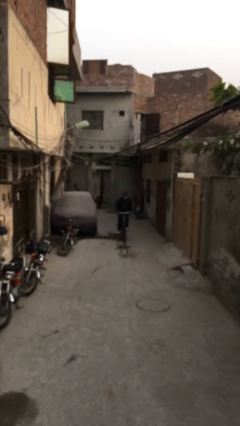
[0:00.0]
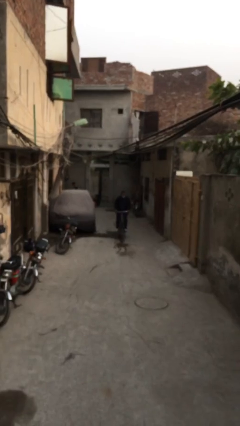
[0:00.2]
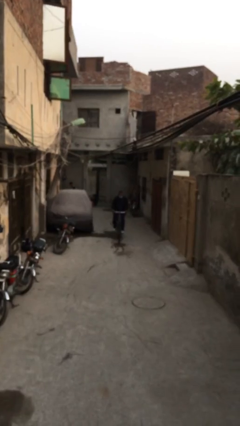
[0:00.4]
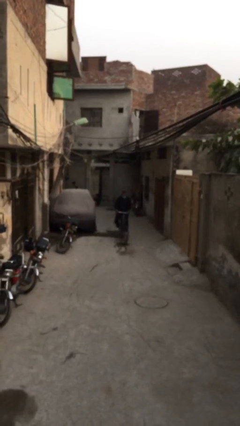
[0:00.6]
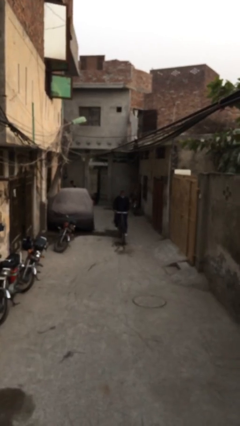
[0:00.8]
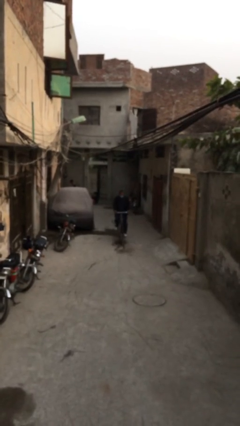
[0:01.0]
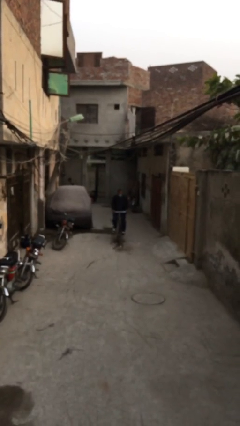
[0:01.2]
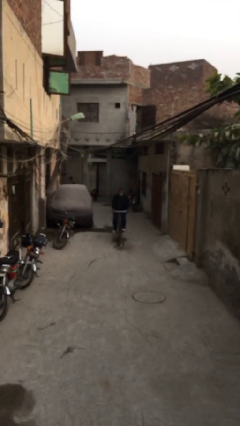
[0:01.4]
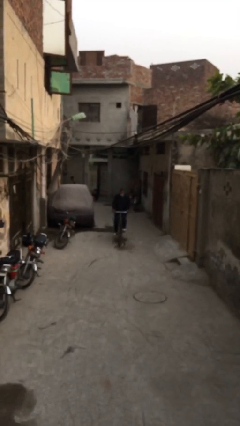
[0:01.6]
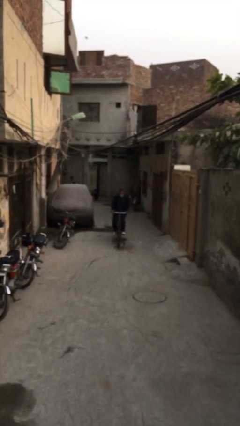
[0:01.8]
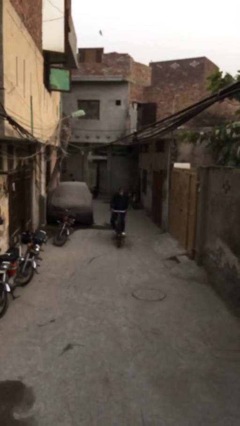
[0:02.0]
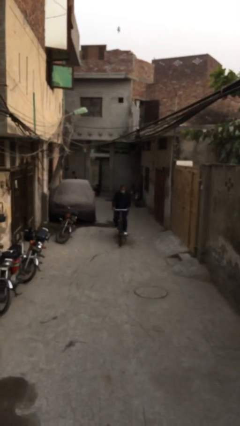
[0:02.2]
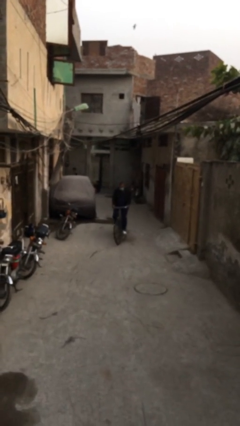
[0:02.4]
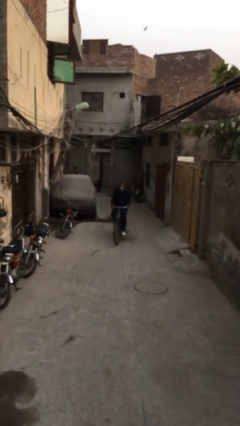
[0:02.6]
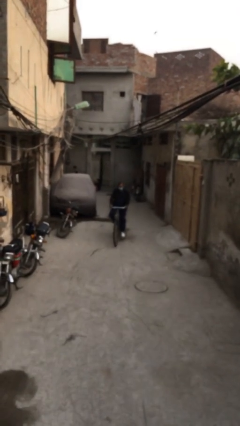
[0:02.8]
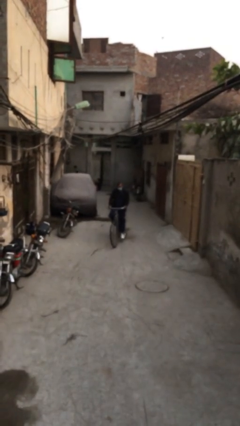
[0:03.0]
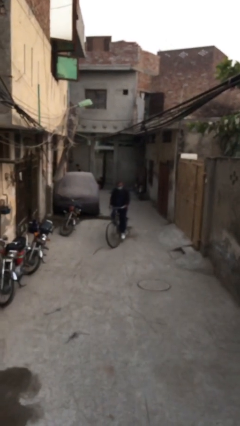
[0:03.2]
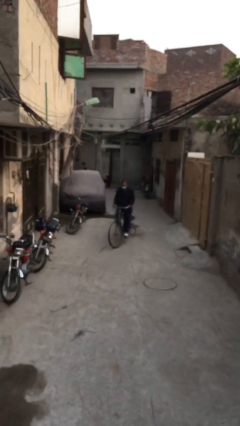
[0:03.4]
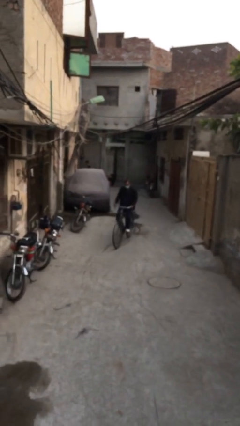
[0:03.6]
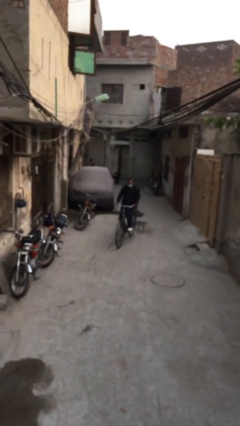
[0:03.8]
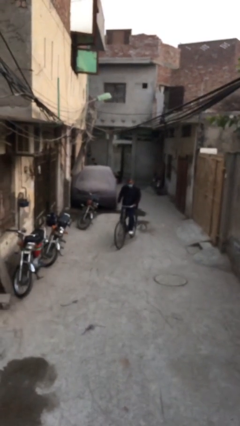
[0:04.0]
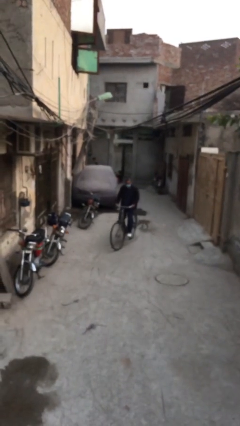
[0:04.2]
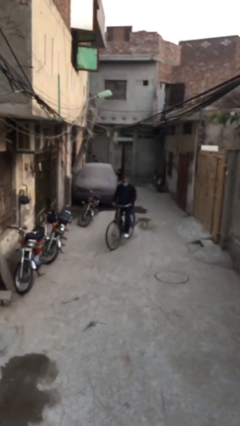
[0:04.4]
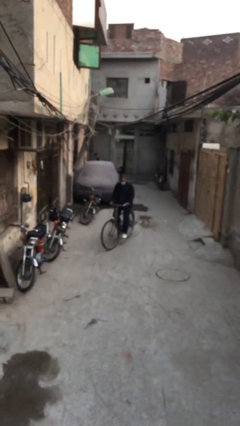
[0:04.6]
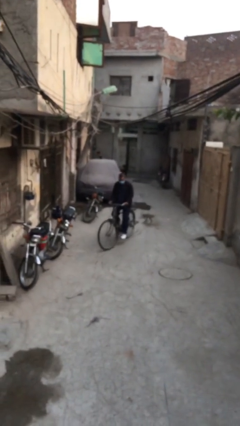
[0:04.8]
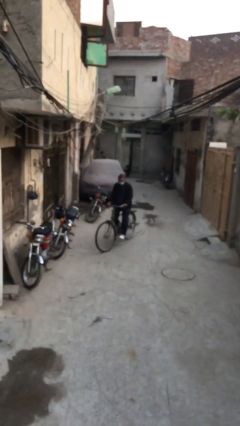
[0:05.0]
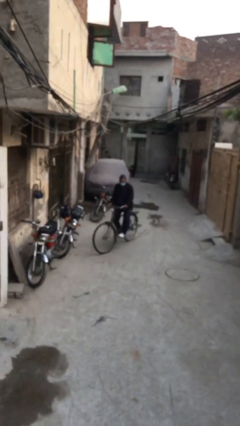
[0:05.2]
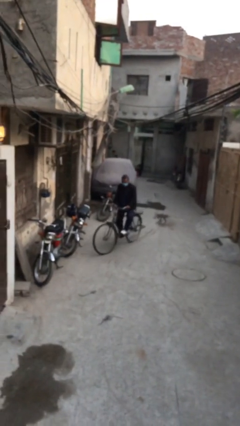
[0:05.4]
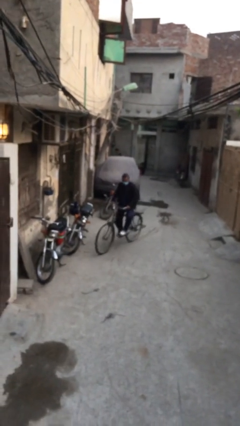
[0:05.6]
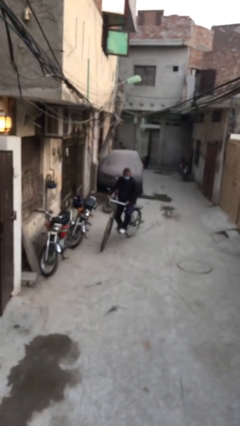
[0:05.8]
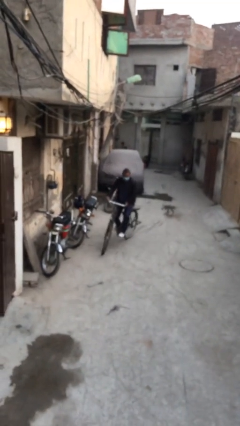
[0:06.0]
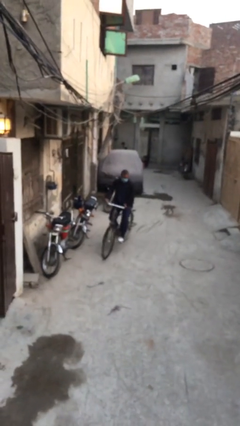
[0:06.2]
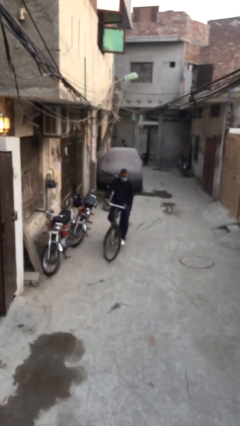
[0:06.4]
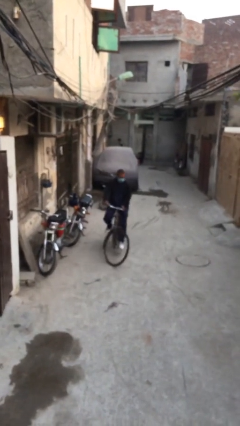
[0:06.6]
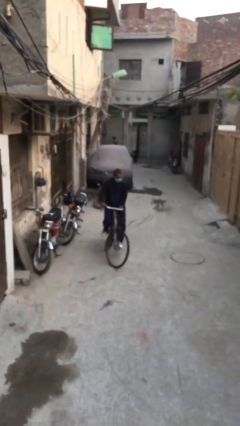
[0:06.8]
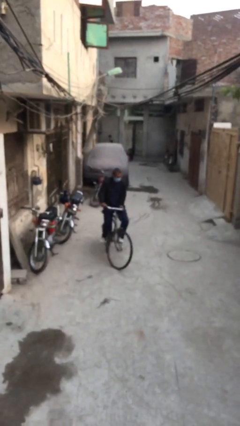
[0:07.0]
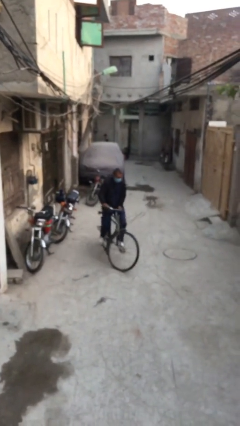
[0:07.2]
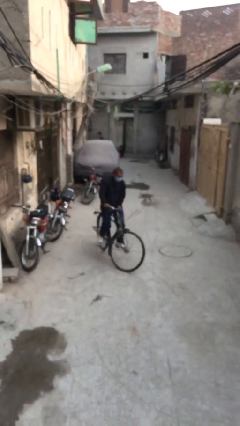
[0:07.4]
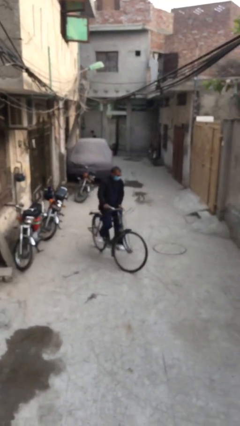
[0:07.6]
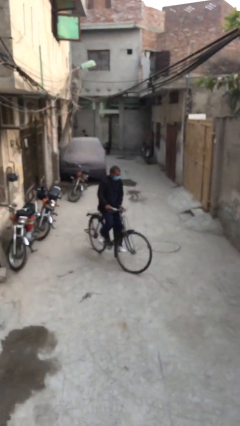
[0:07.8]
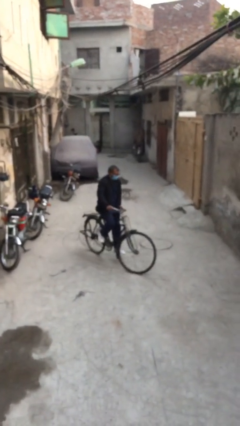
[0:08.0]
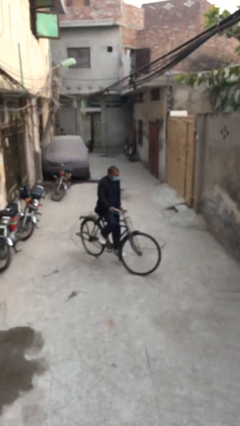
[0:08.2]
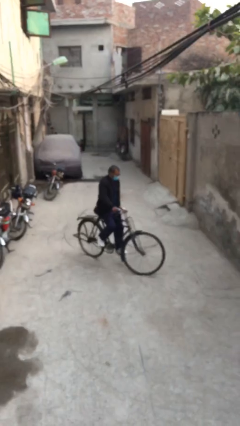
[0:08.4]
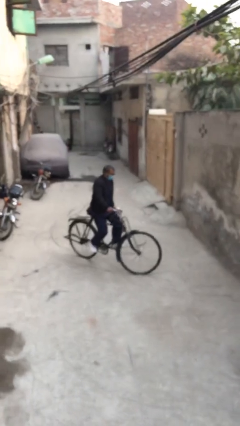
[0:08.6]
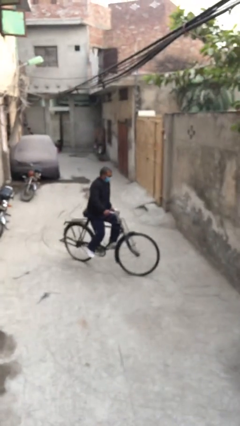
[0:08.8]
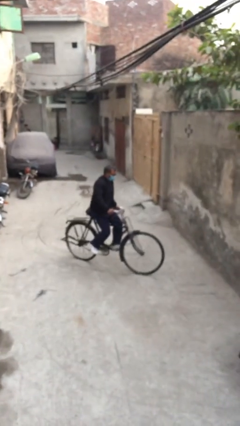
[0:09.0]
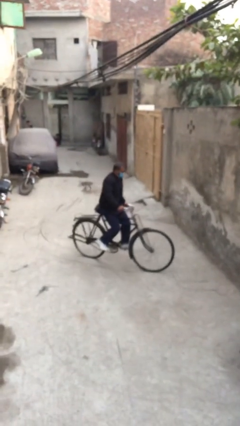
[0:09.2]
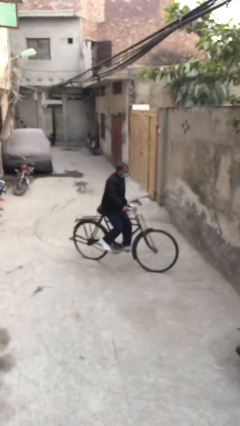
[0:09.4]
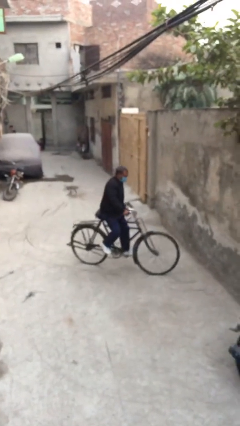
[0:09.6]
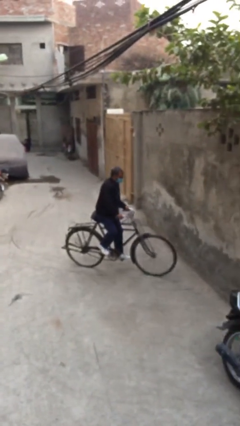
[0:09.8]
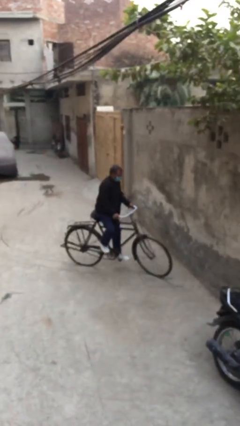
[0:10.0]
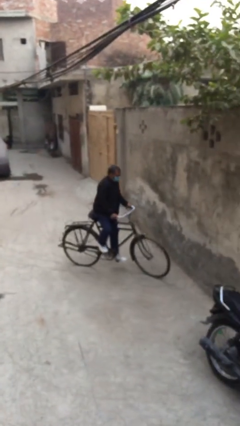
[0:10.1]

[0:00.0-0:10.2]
person rides bicycle

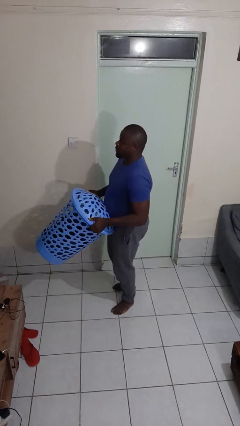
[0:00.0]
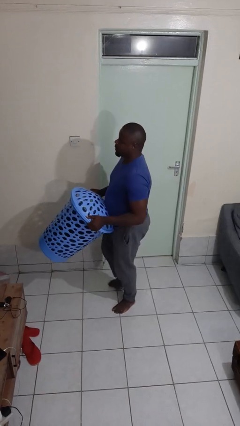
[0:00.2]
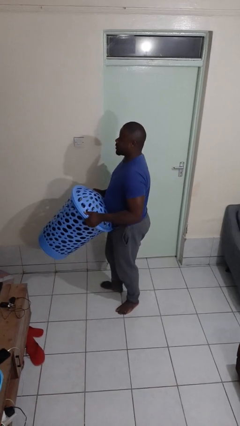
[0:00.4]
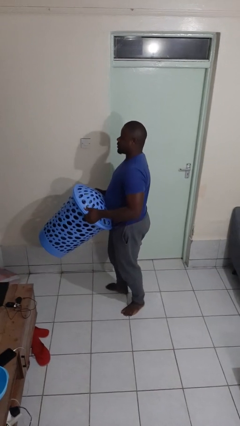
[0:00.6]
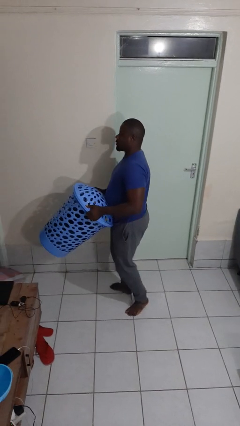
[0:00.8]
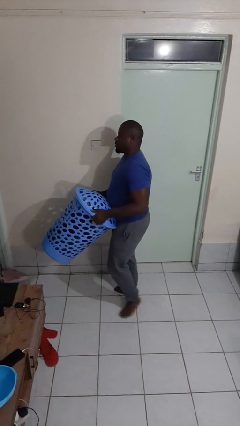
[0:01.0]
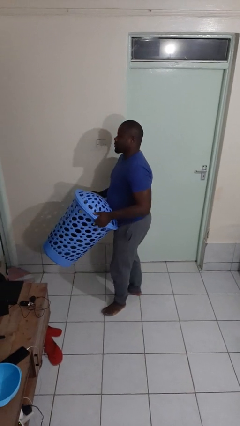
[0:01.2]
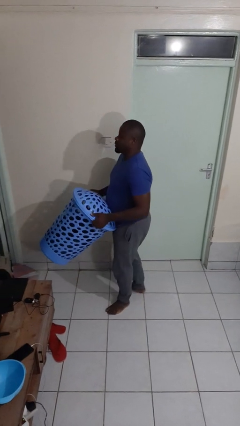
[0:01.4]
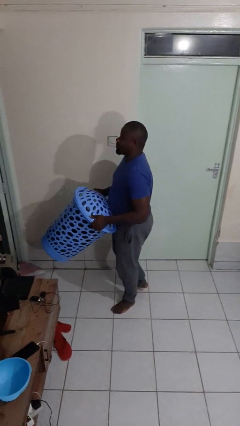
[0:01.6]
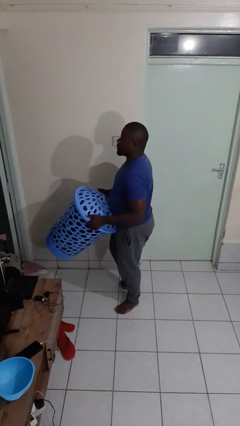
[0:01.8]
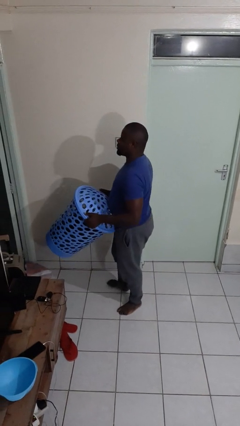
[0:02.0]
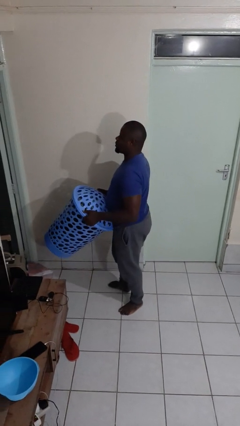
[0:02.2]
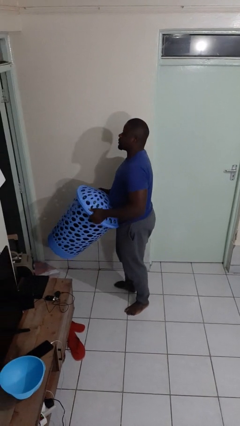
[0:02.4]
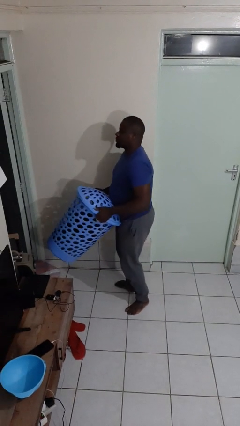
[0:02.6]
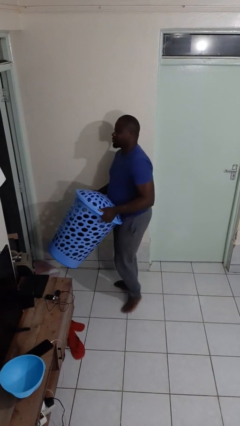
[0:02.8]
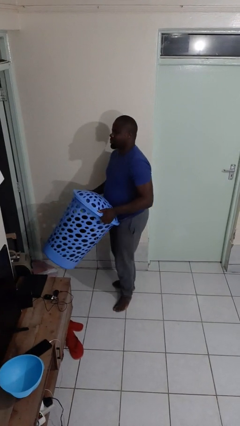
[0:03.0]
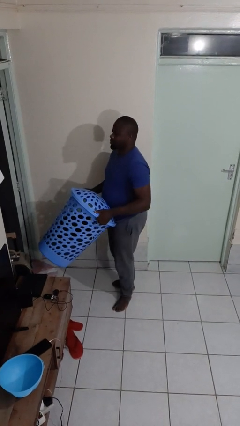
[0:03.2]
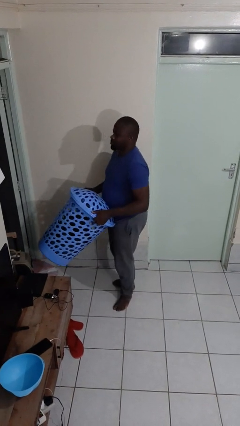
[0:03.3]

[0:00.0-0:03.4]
person carries laundry basket

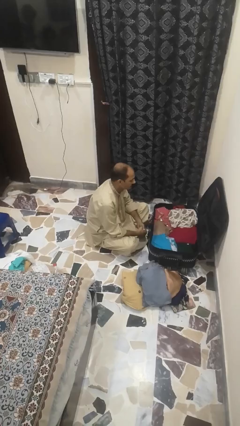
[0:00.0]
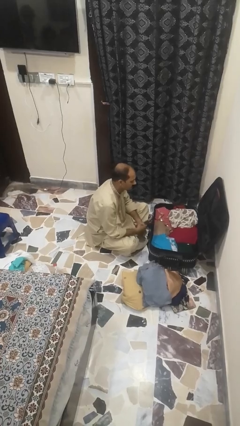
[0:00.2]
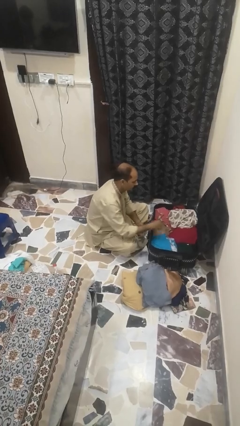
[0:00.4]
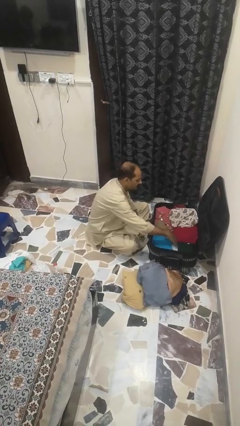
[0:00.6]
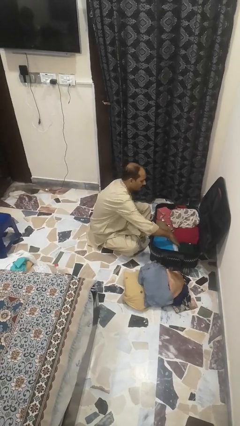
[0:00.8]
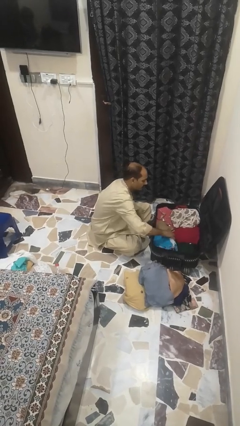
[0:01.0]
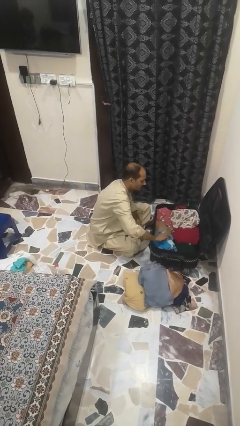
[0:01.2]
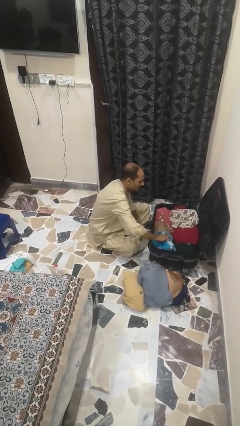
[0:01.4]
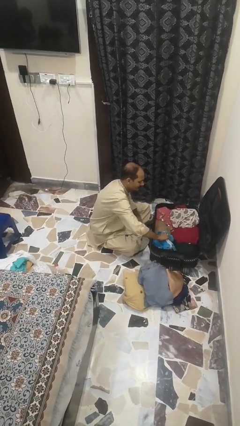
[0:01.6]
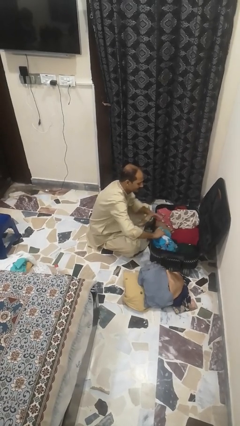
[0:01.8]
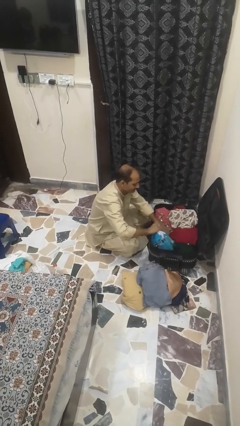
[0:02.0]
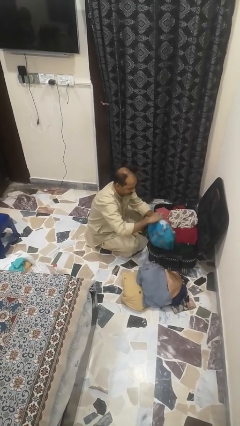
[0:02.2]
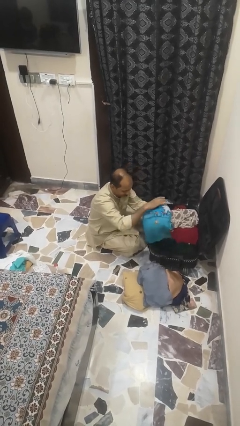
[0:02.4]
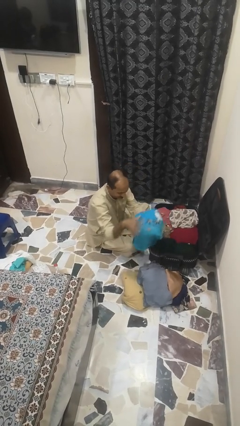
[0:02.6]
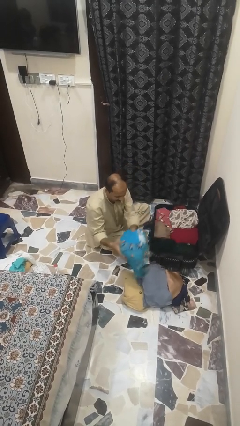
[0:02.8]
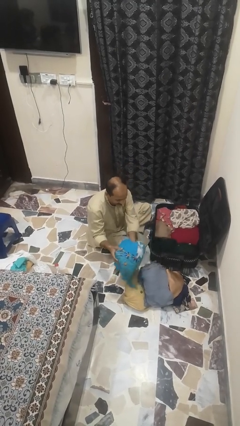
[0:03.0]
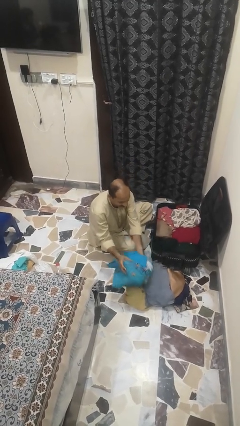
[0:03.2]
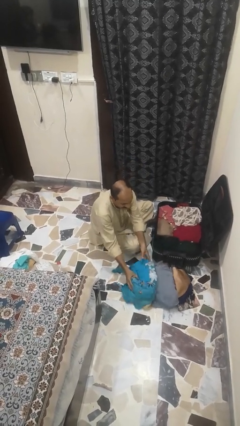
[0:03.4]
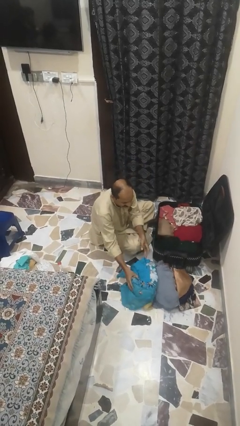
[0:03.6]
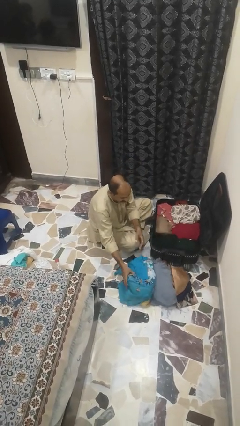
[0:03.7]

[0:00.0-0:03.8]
person unloads clothes from suitcase
